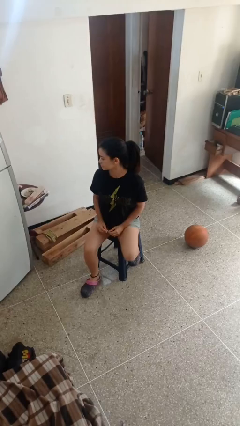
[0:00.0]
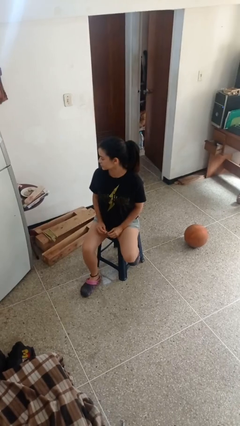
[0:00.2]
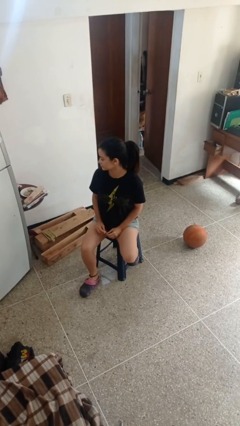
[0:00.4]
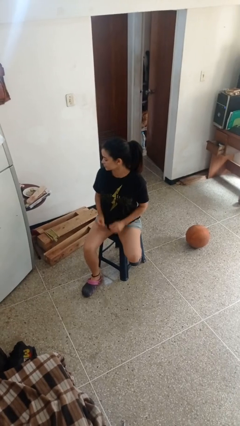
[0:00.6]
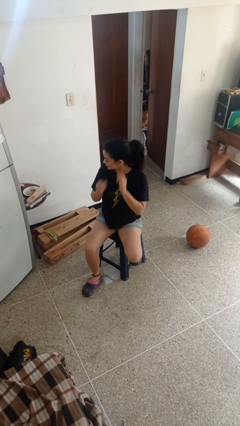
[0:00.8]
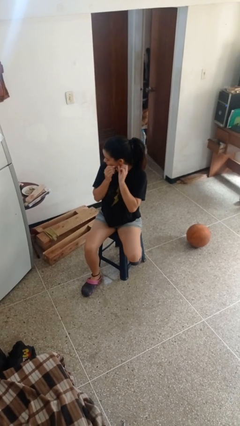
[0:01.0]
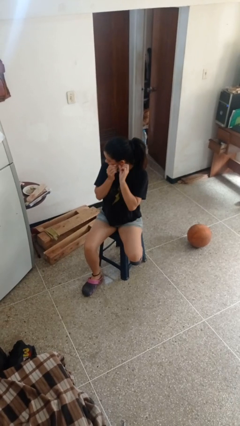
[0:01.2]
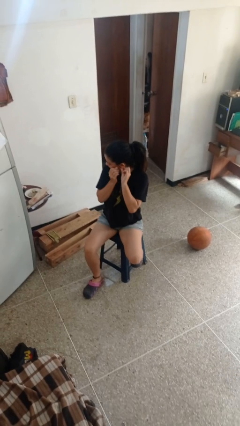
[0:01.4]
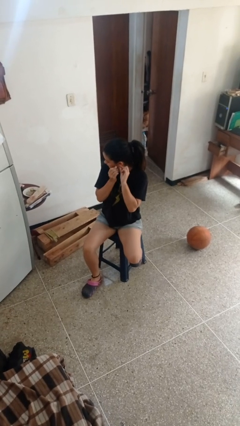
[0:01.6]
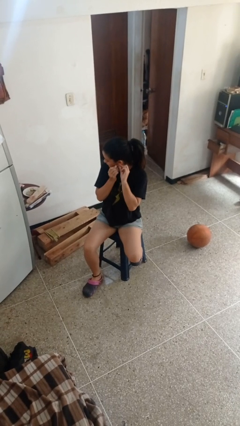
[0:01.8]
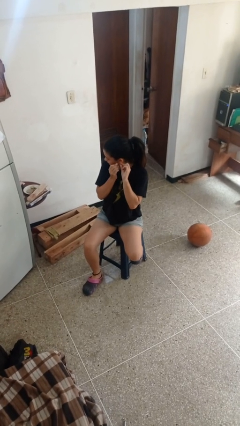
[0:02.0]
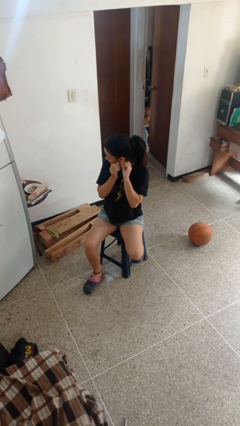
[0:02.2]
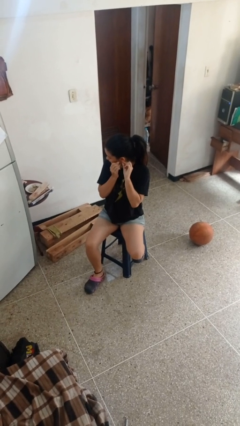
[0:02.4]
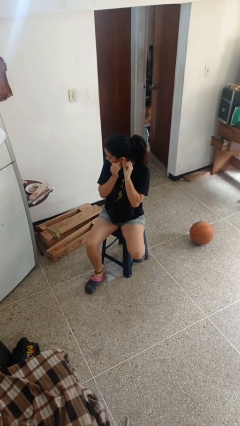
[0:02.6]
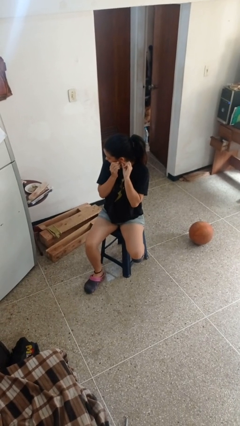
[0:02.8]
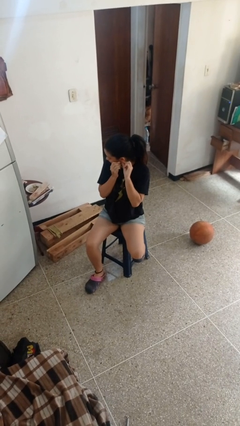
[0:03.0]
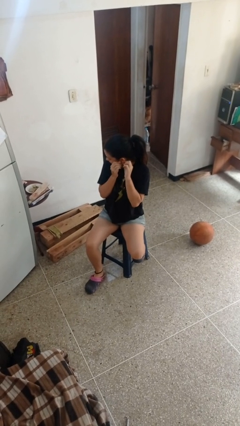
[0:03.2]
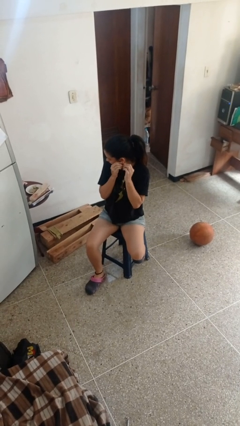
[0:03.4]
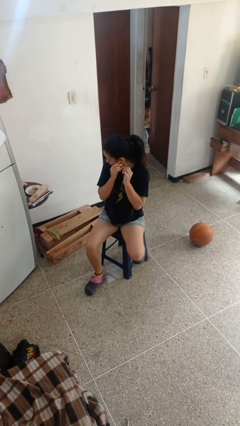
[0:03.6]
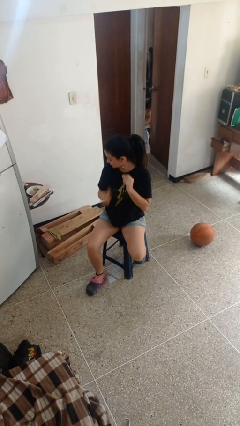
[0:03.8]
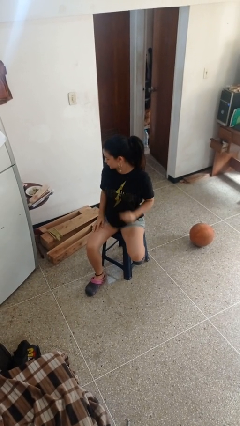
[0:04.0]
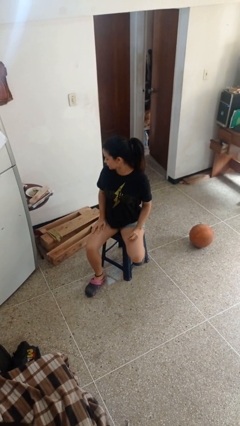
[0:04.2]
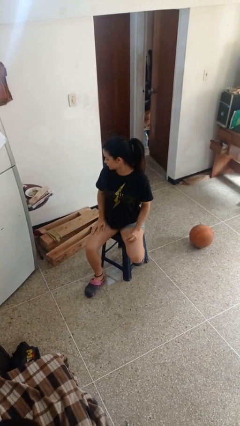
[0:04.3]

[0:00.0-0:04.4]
person puts on earrings

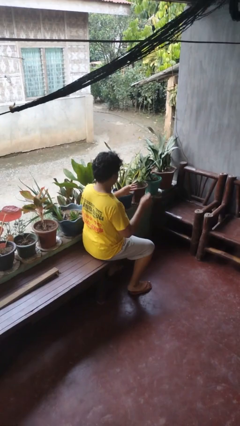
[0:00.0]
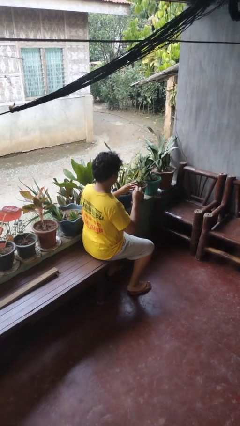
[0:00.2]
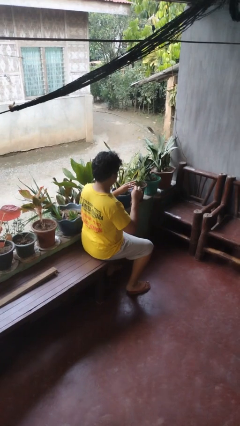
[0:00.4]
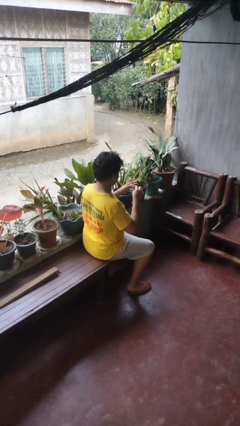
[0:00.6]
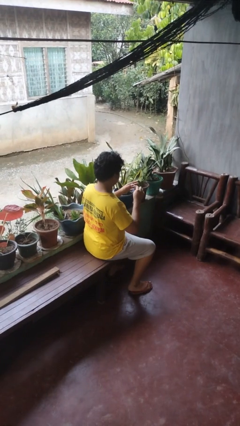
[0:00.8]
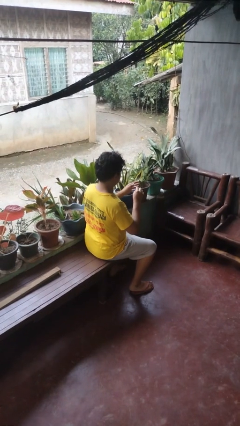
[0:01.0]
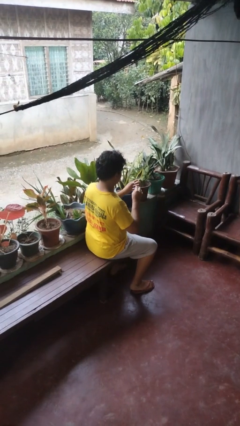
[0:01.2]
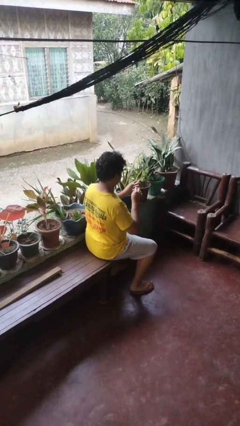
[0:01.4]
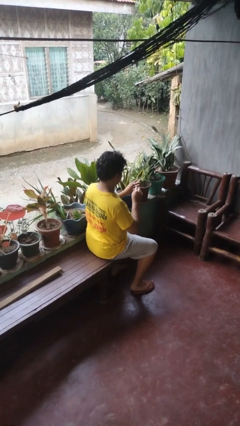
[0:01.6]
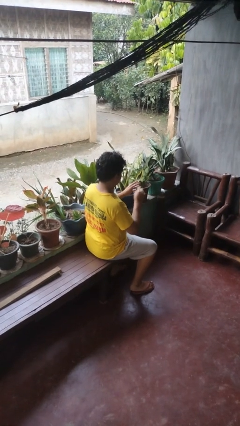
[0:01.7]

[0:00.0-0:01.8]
person files fingernails

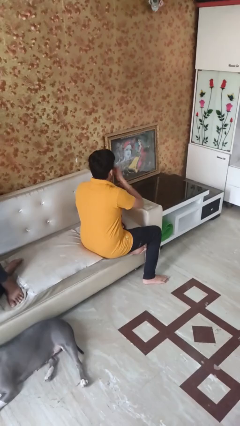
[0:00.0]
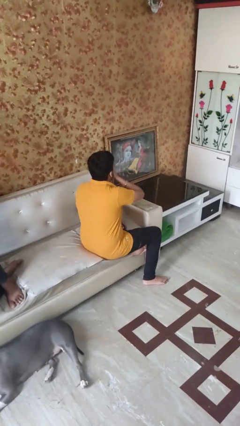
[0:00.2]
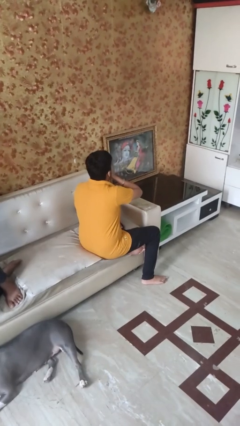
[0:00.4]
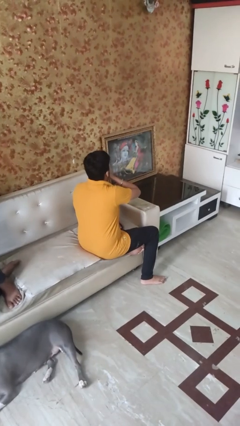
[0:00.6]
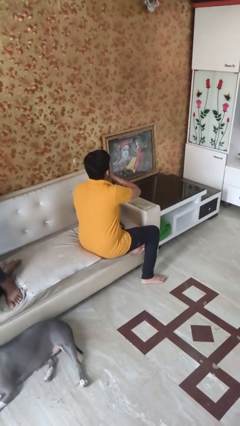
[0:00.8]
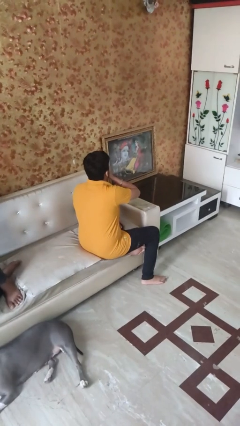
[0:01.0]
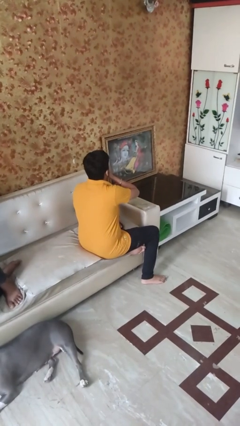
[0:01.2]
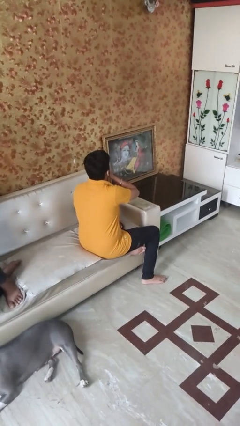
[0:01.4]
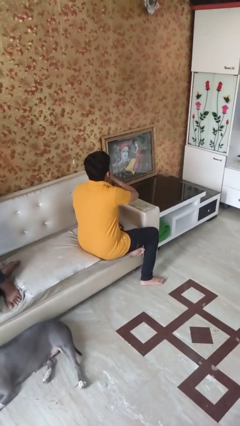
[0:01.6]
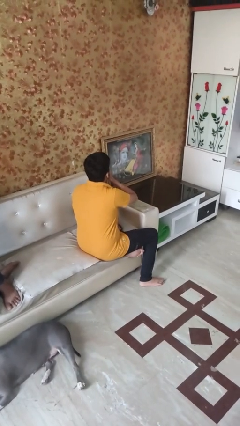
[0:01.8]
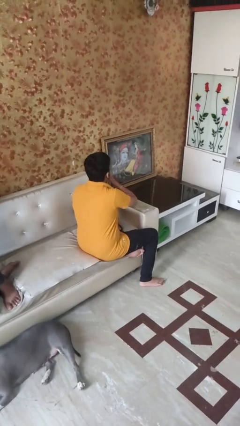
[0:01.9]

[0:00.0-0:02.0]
person yawns

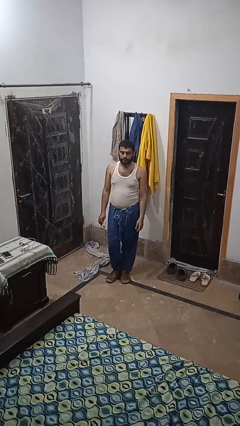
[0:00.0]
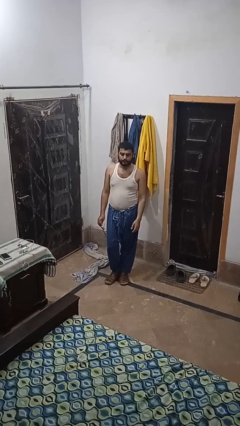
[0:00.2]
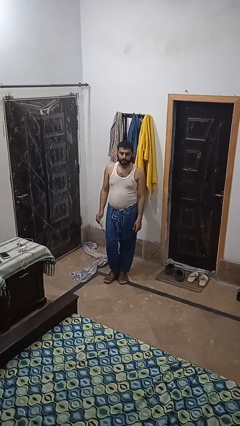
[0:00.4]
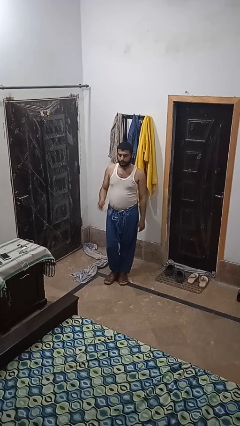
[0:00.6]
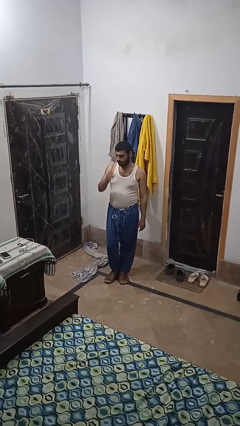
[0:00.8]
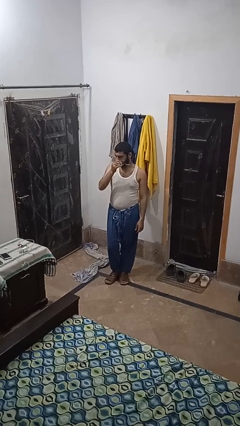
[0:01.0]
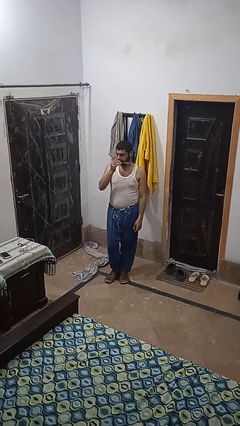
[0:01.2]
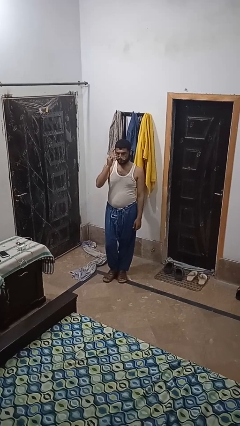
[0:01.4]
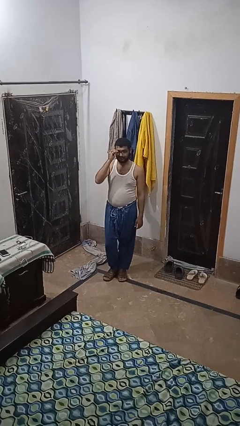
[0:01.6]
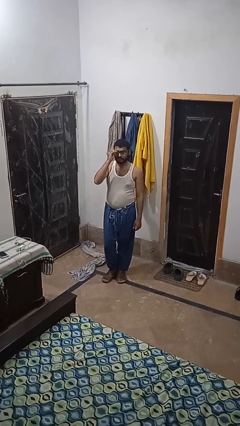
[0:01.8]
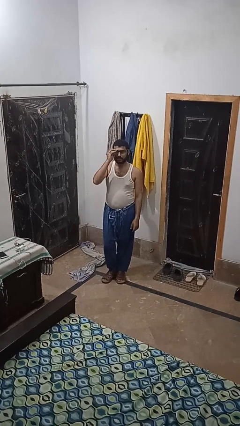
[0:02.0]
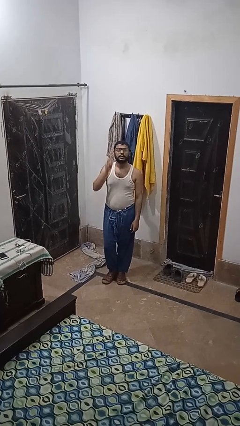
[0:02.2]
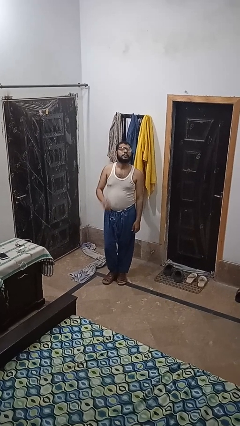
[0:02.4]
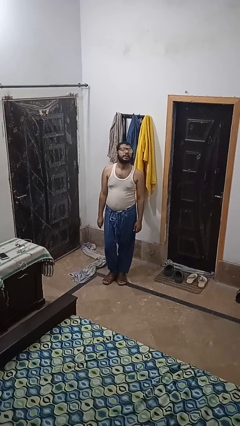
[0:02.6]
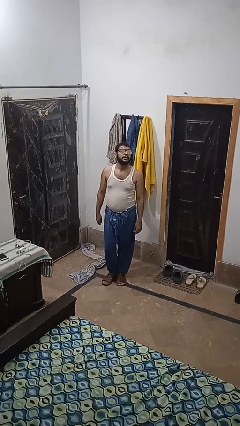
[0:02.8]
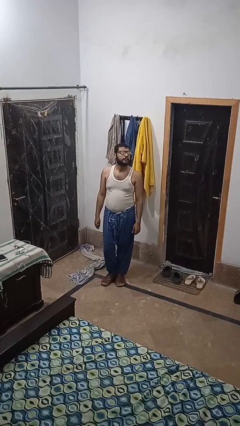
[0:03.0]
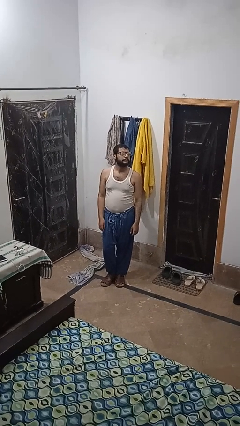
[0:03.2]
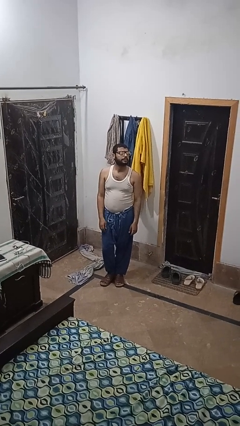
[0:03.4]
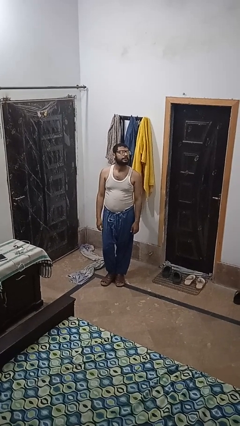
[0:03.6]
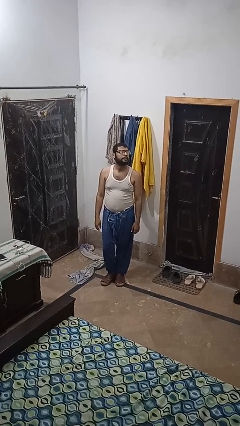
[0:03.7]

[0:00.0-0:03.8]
person puts on glasses

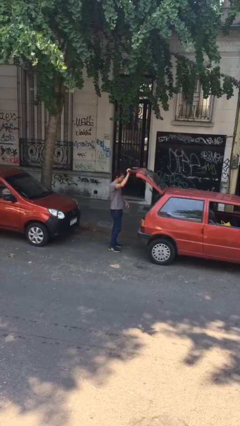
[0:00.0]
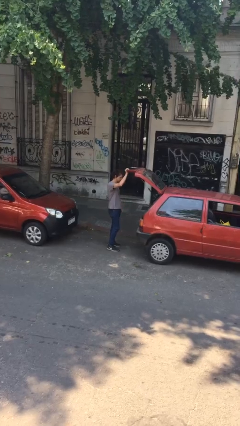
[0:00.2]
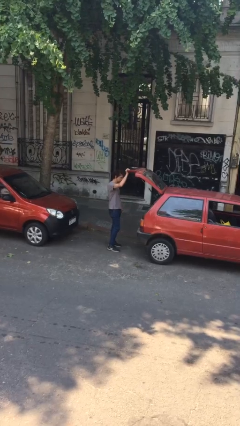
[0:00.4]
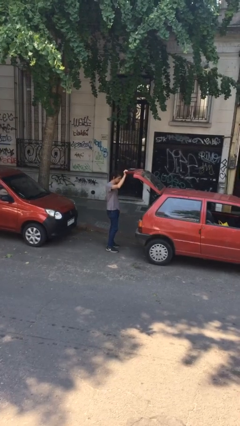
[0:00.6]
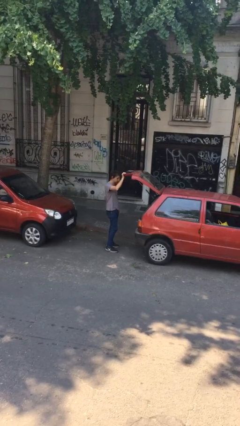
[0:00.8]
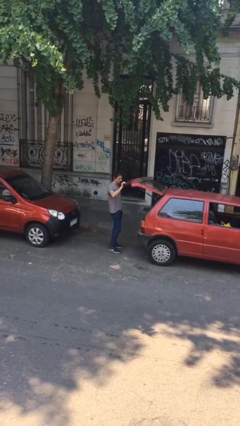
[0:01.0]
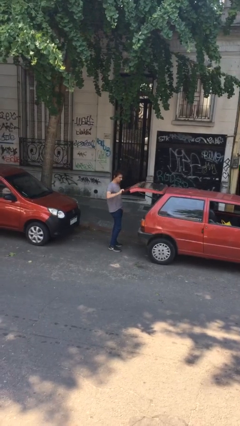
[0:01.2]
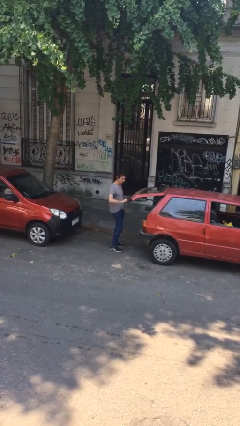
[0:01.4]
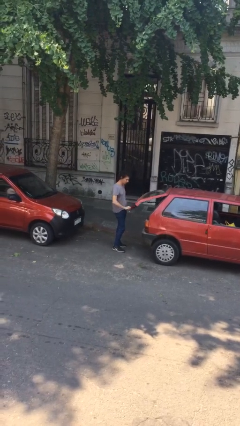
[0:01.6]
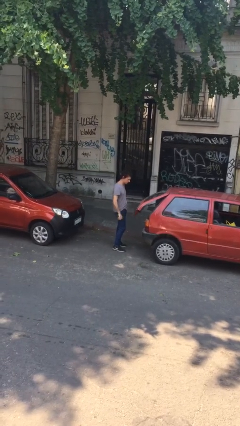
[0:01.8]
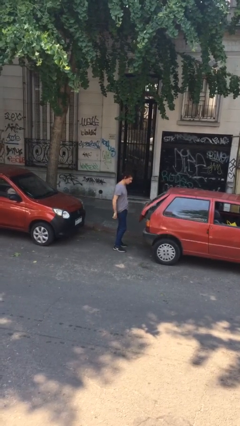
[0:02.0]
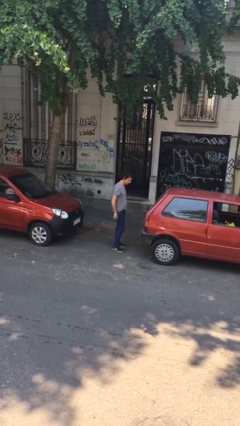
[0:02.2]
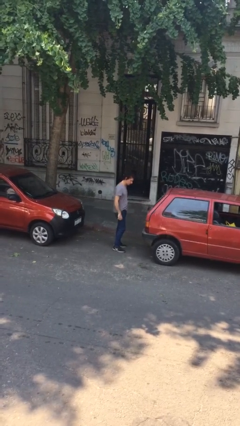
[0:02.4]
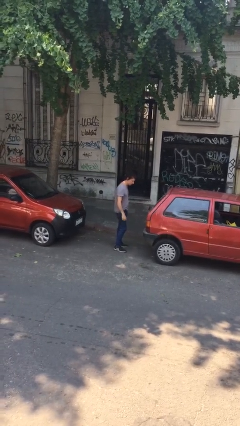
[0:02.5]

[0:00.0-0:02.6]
person closes car trunk

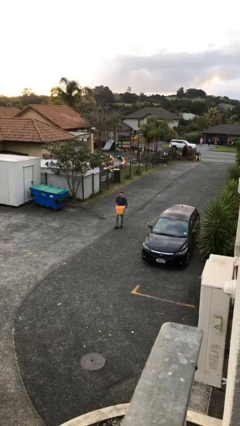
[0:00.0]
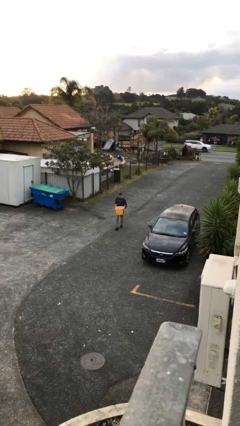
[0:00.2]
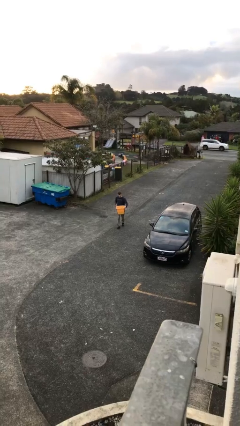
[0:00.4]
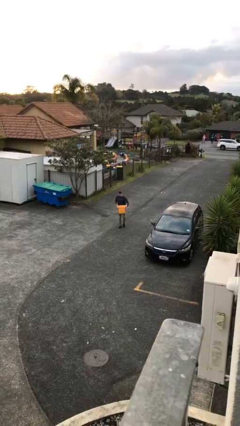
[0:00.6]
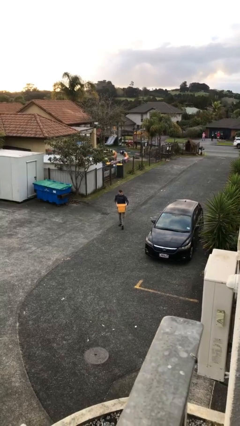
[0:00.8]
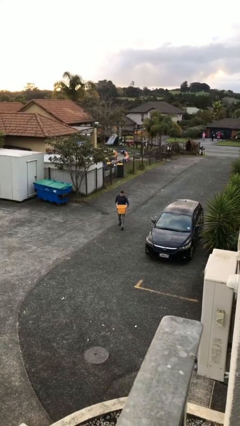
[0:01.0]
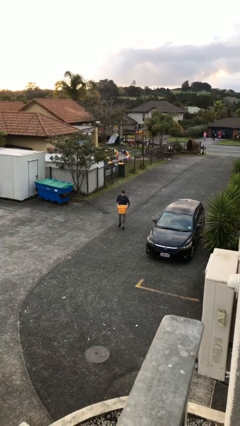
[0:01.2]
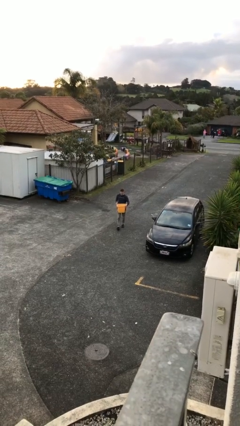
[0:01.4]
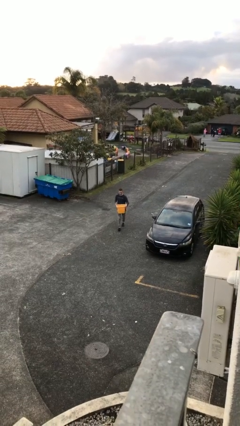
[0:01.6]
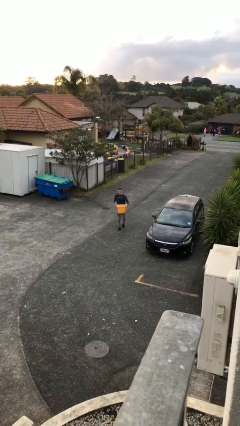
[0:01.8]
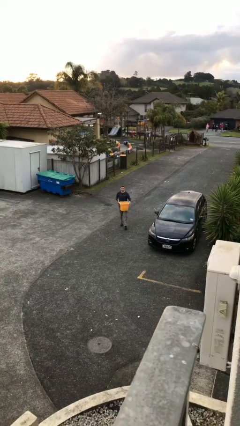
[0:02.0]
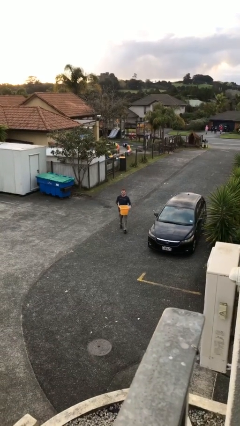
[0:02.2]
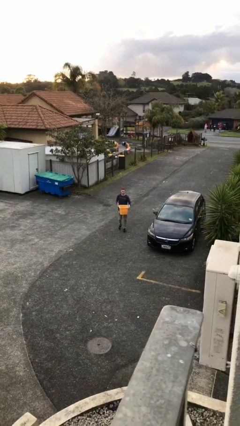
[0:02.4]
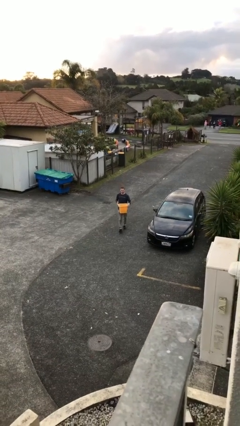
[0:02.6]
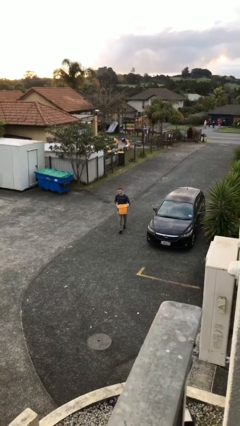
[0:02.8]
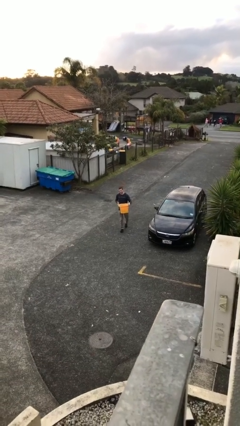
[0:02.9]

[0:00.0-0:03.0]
person carries heavy object
